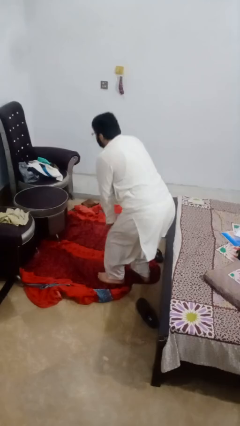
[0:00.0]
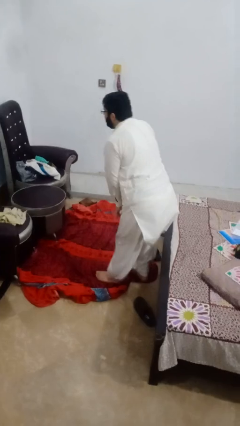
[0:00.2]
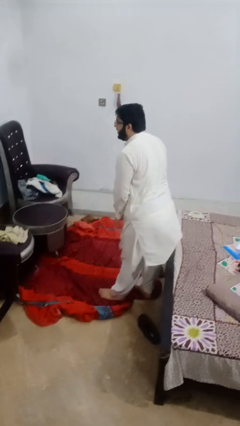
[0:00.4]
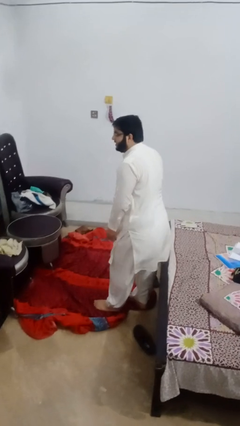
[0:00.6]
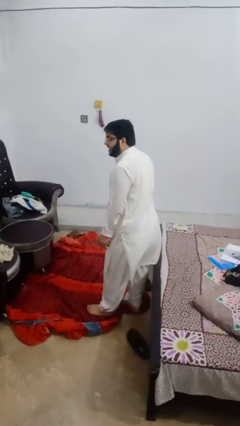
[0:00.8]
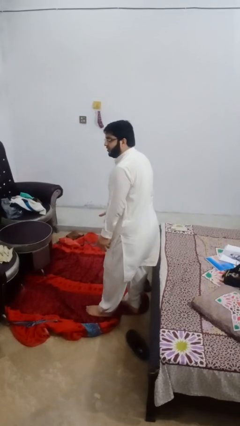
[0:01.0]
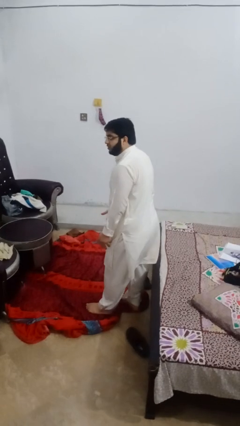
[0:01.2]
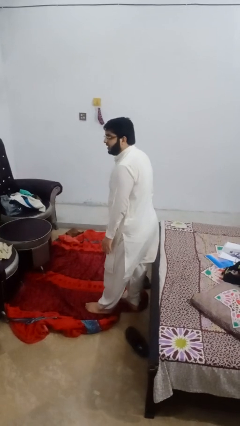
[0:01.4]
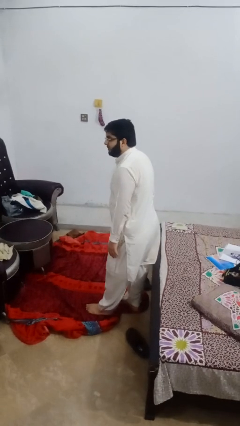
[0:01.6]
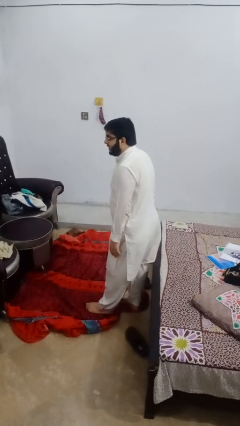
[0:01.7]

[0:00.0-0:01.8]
person stands up from floor

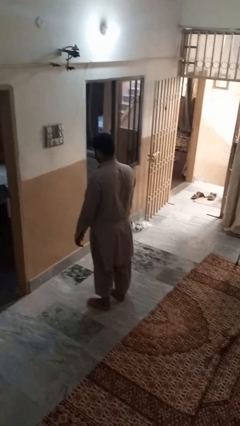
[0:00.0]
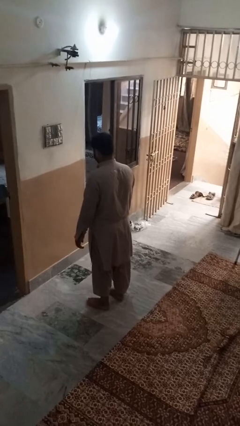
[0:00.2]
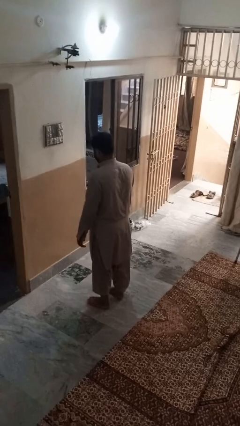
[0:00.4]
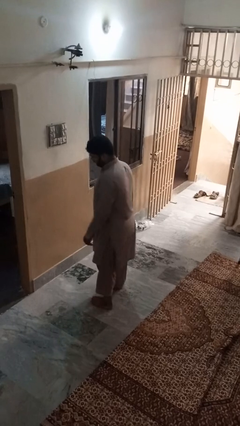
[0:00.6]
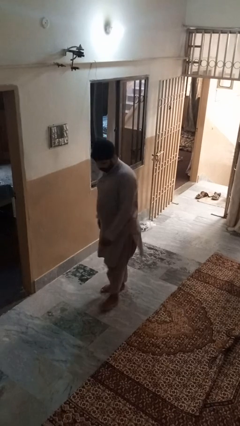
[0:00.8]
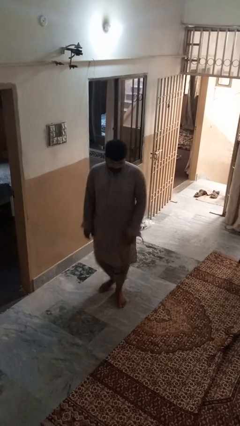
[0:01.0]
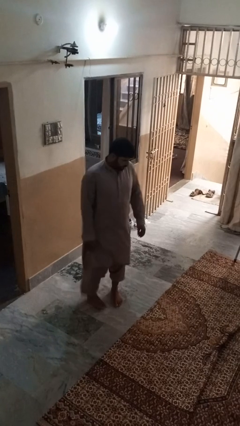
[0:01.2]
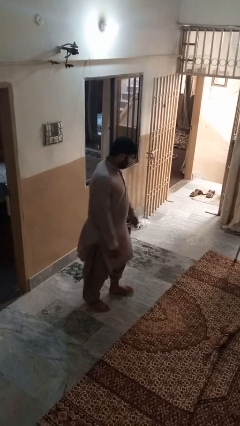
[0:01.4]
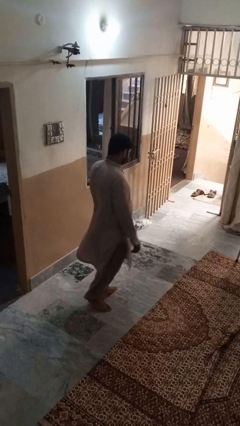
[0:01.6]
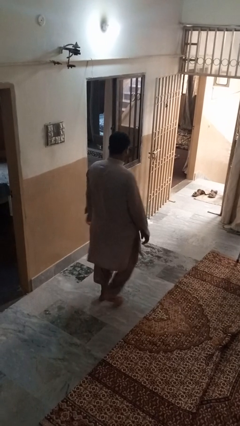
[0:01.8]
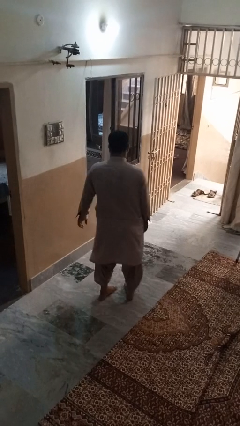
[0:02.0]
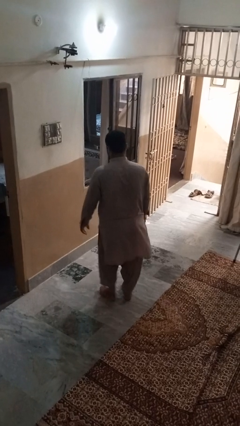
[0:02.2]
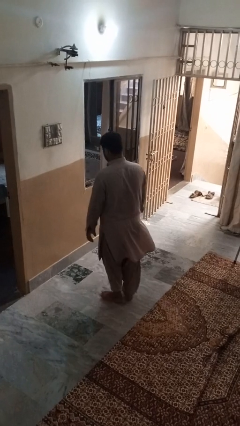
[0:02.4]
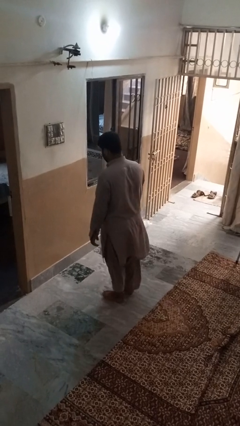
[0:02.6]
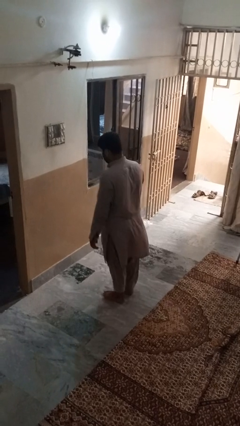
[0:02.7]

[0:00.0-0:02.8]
person twirls

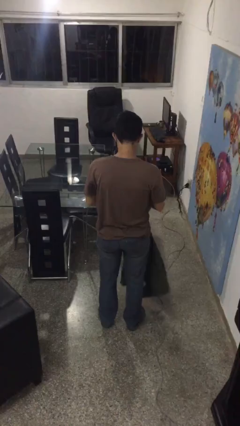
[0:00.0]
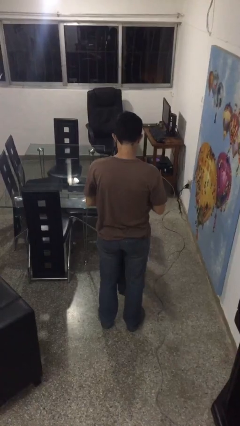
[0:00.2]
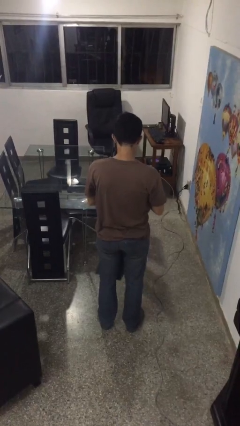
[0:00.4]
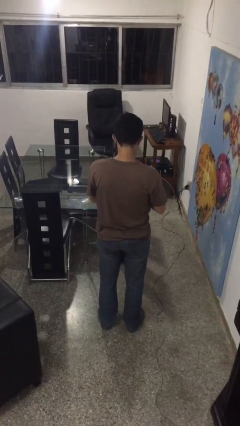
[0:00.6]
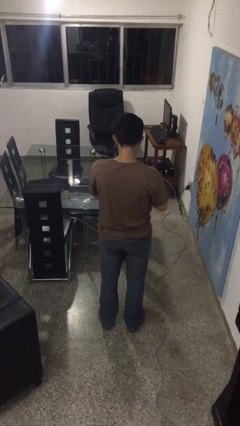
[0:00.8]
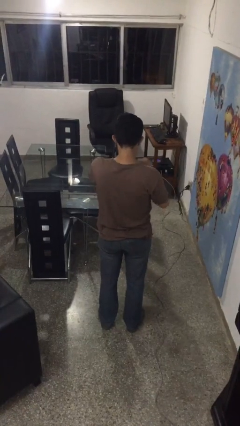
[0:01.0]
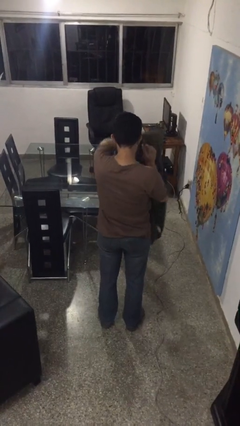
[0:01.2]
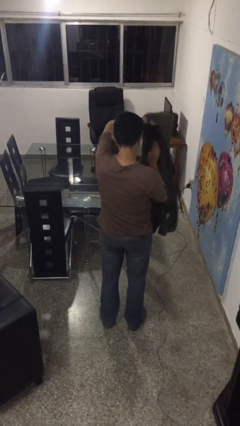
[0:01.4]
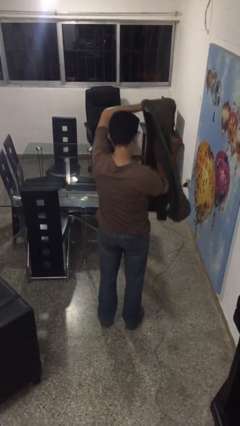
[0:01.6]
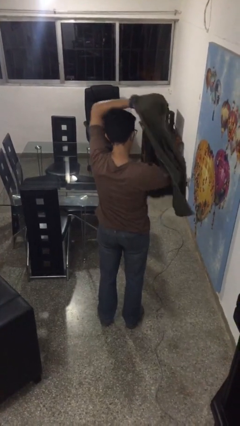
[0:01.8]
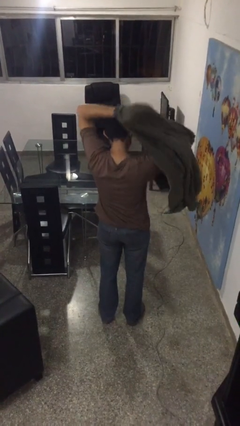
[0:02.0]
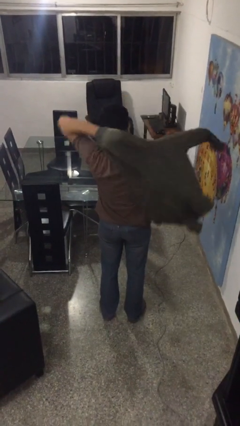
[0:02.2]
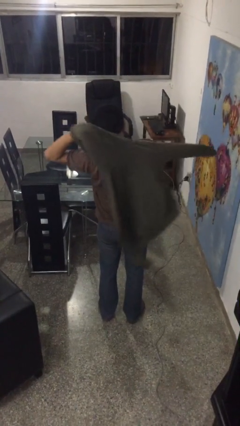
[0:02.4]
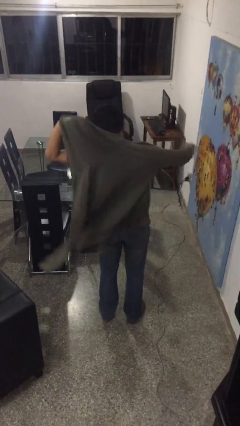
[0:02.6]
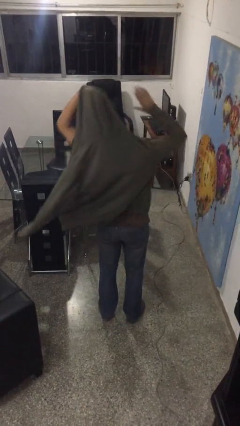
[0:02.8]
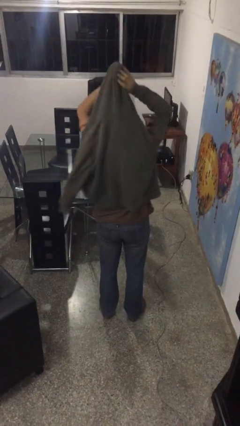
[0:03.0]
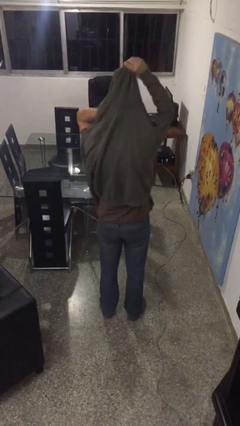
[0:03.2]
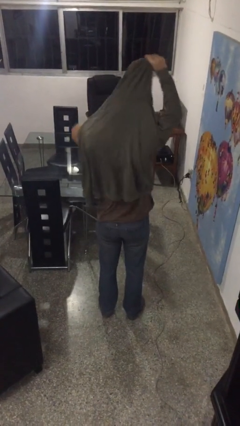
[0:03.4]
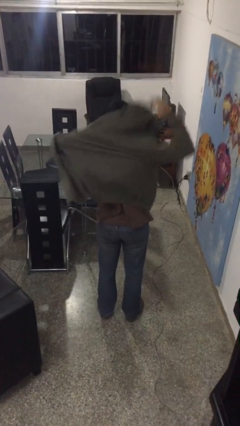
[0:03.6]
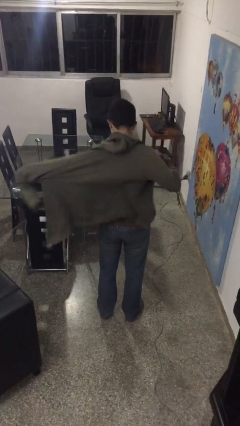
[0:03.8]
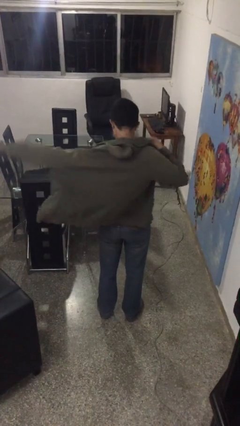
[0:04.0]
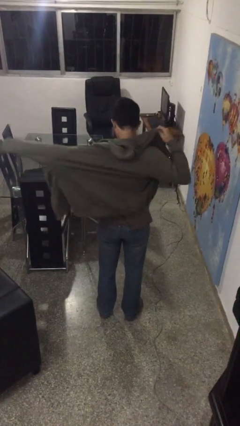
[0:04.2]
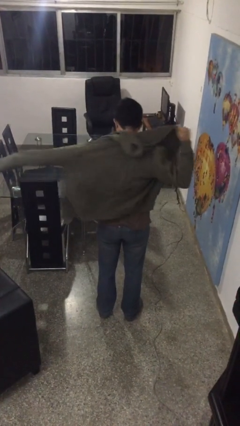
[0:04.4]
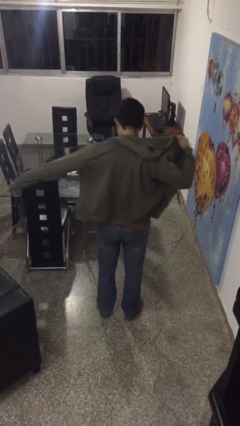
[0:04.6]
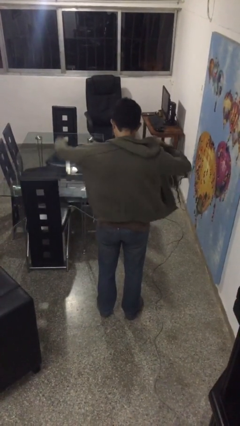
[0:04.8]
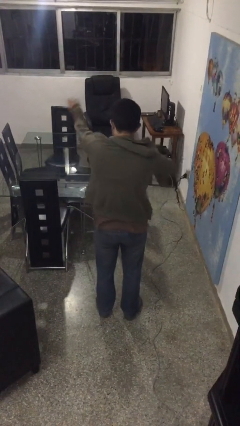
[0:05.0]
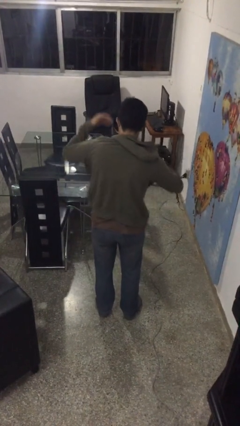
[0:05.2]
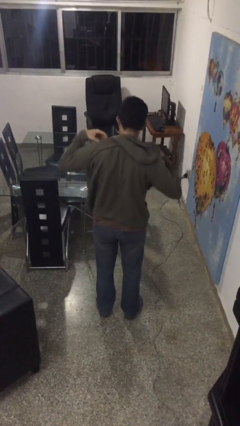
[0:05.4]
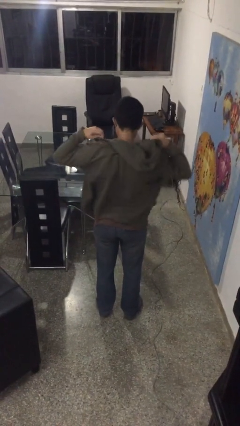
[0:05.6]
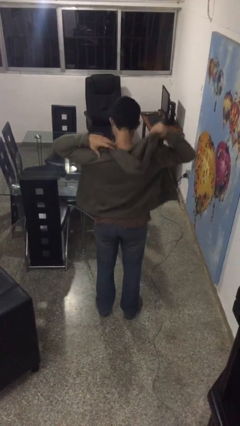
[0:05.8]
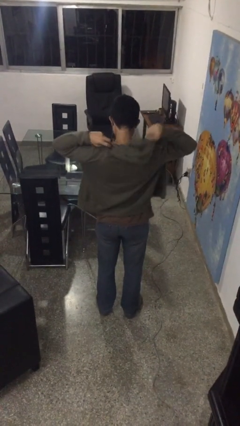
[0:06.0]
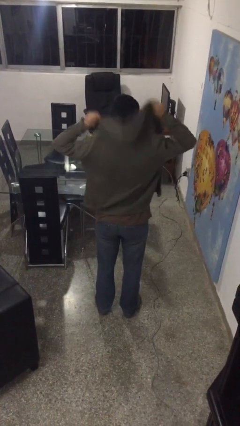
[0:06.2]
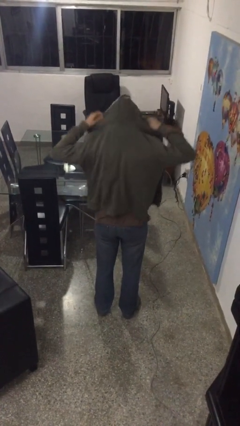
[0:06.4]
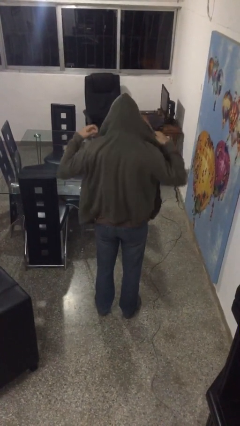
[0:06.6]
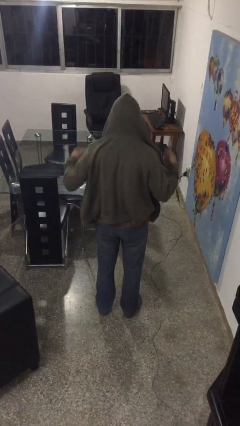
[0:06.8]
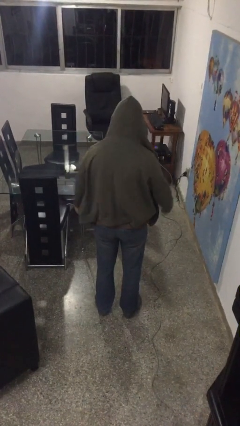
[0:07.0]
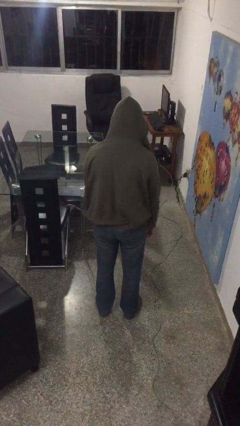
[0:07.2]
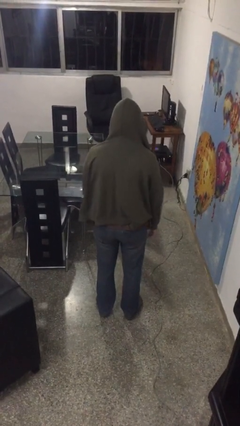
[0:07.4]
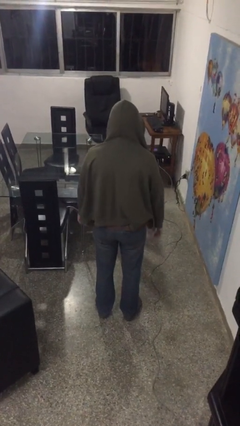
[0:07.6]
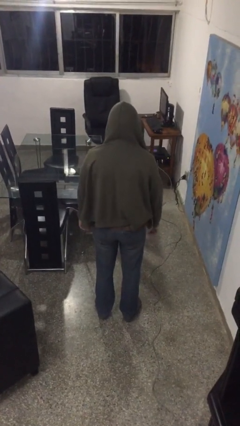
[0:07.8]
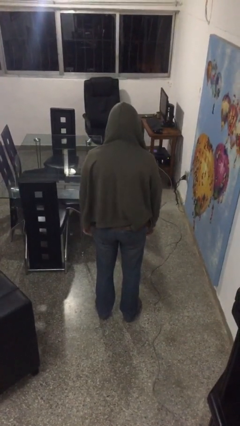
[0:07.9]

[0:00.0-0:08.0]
person puts on hoodie

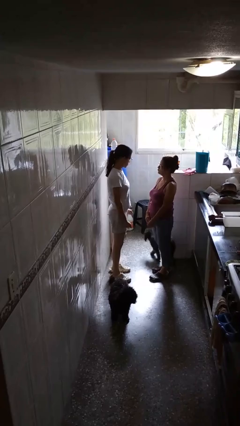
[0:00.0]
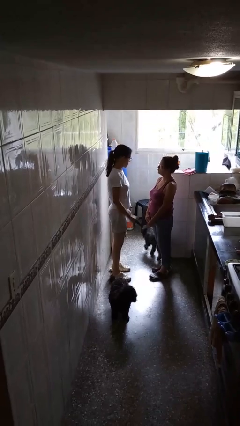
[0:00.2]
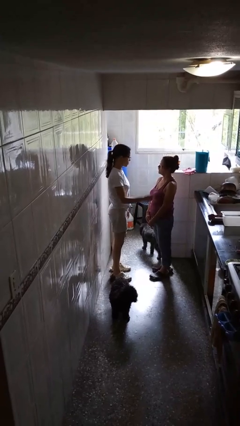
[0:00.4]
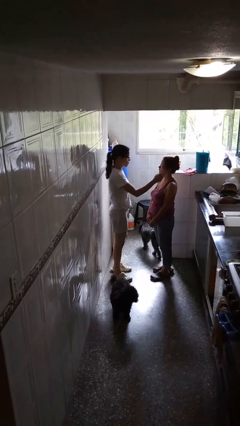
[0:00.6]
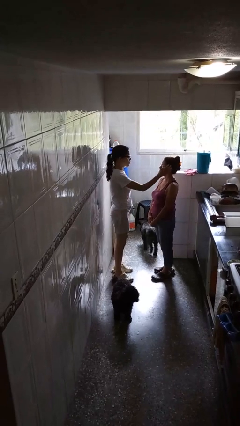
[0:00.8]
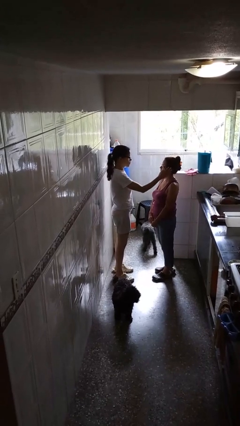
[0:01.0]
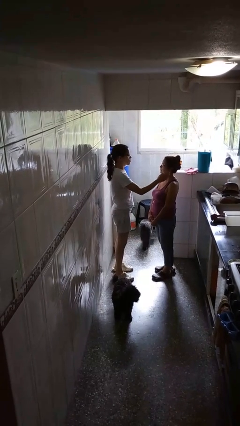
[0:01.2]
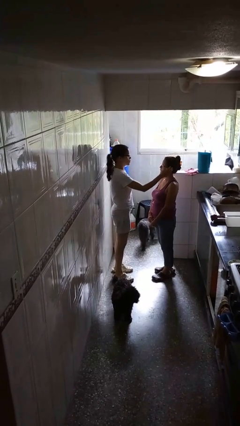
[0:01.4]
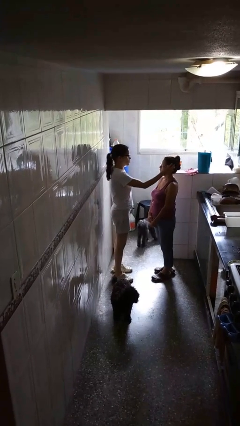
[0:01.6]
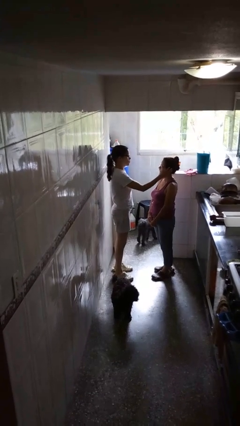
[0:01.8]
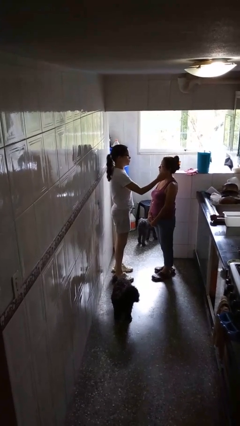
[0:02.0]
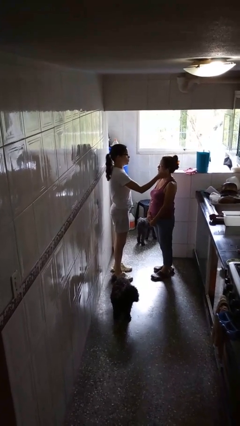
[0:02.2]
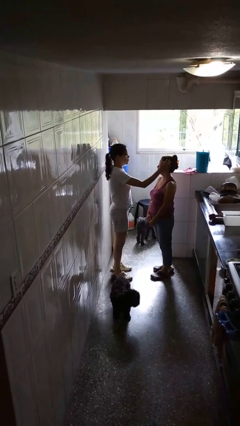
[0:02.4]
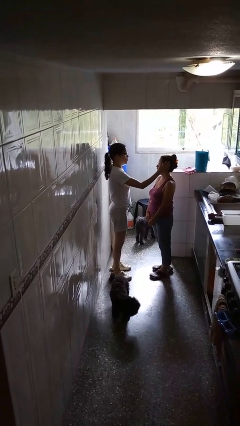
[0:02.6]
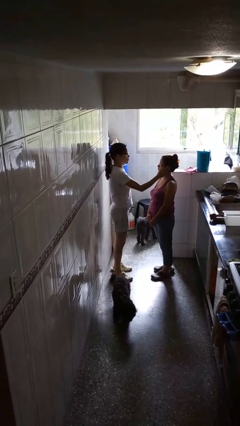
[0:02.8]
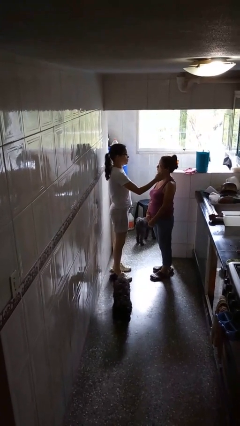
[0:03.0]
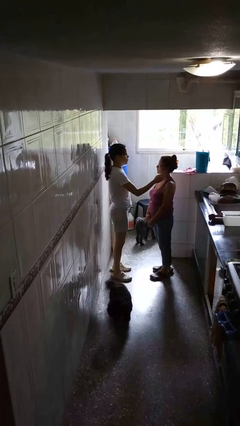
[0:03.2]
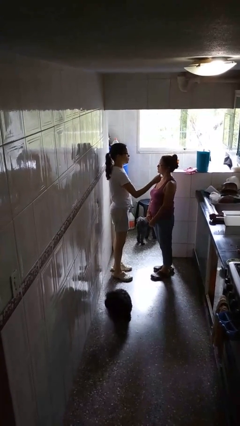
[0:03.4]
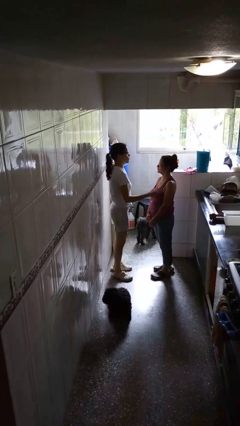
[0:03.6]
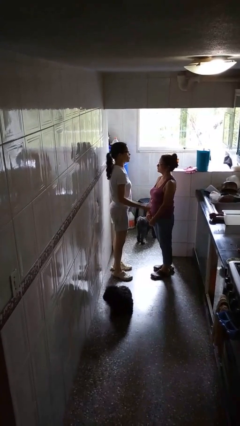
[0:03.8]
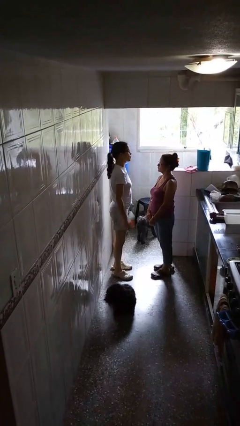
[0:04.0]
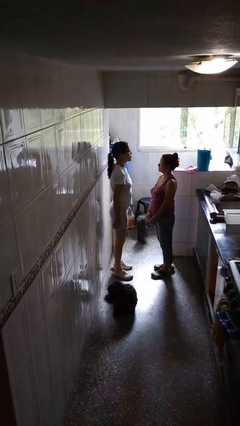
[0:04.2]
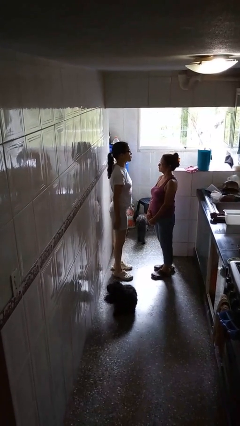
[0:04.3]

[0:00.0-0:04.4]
person touches face of person

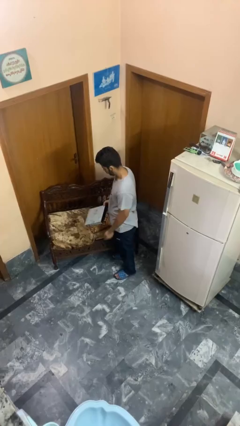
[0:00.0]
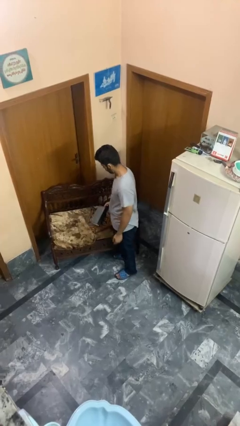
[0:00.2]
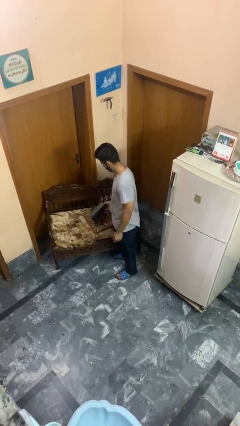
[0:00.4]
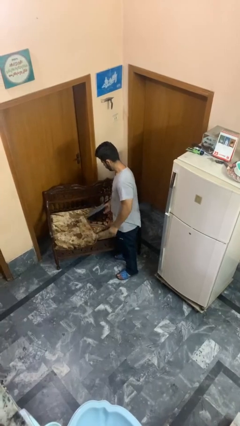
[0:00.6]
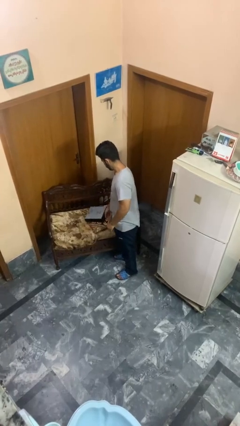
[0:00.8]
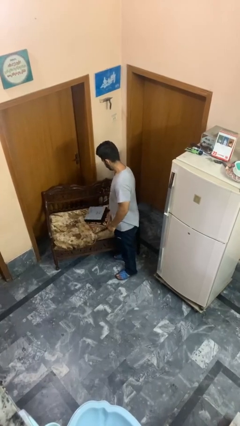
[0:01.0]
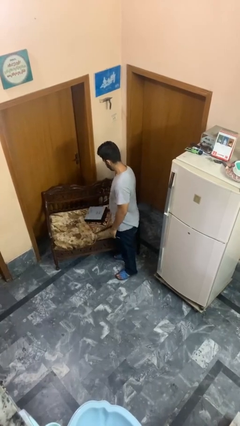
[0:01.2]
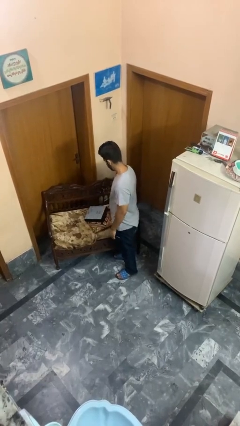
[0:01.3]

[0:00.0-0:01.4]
person puts down object on couch
